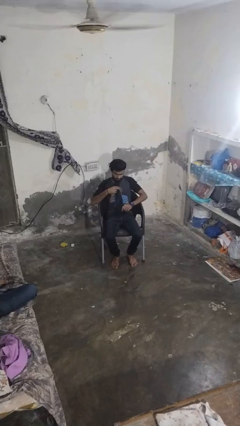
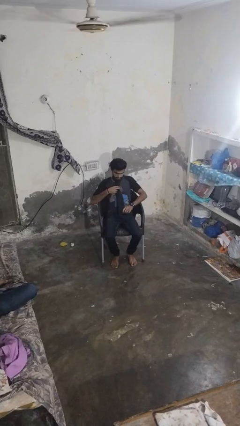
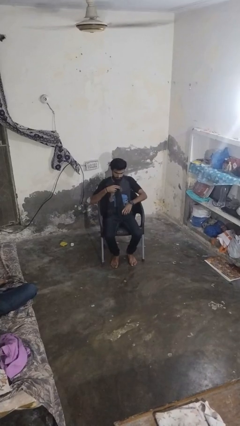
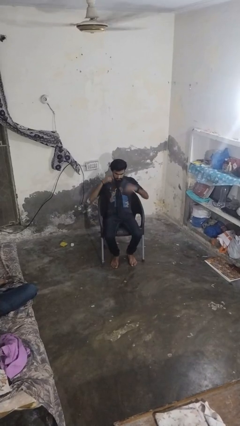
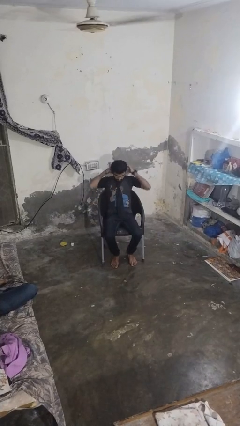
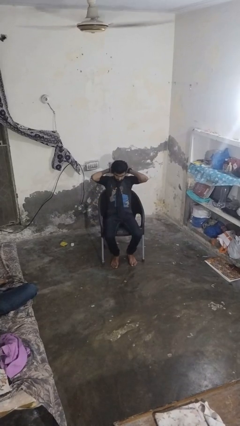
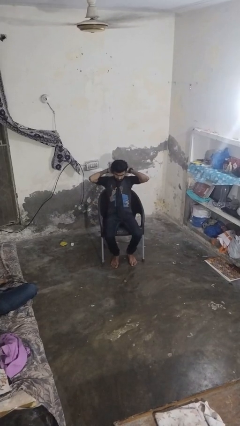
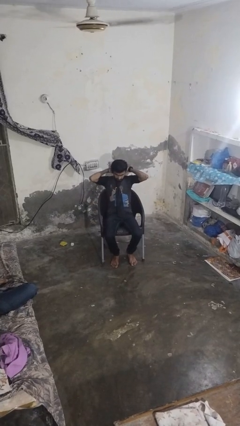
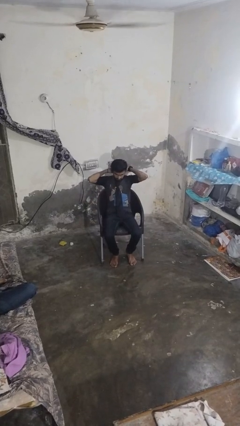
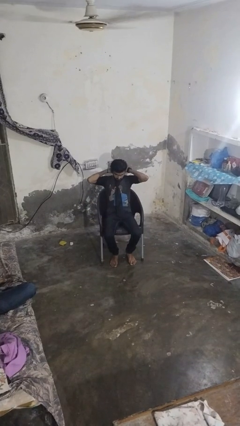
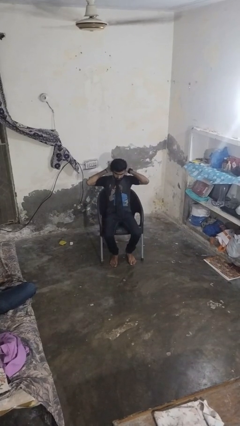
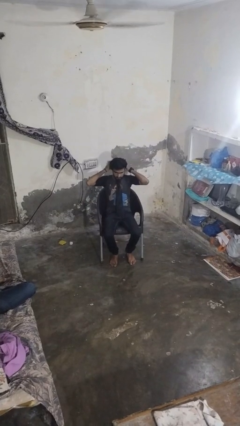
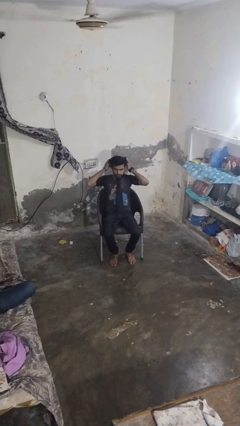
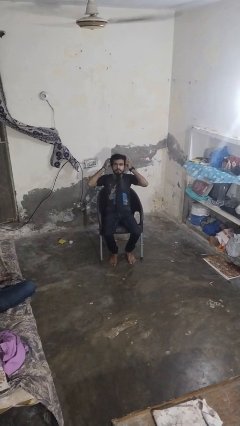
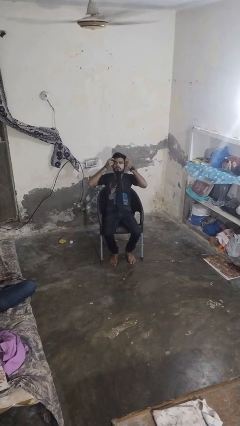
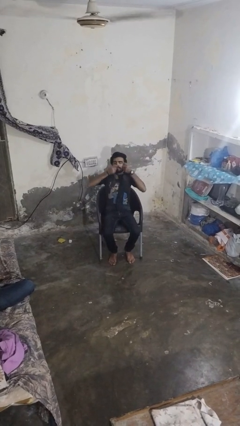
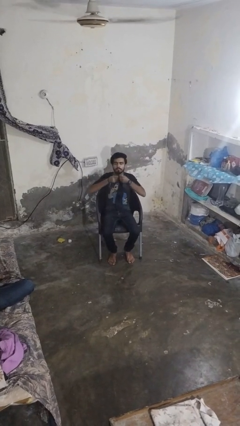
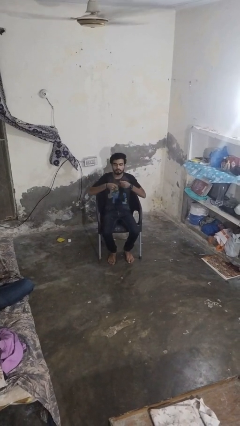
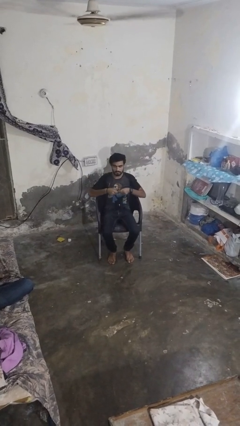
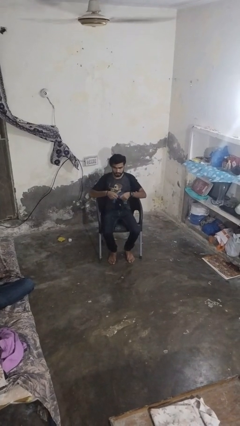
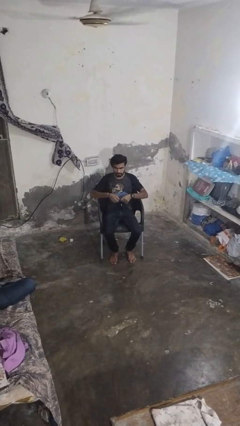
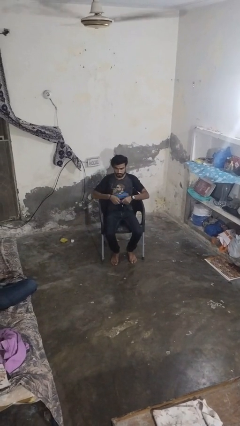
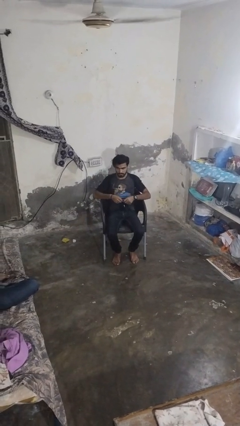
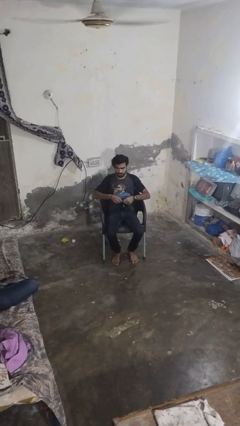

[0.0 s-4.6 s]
person takes off necktie

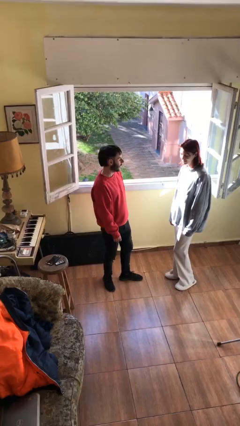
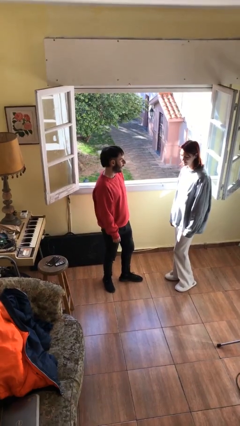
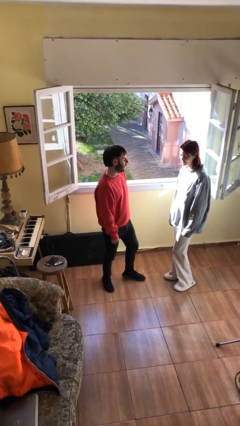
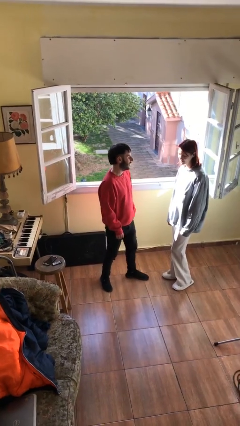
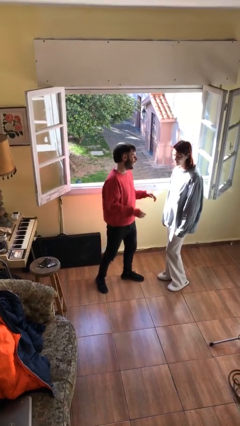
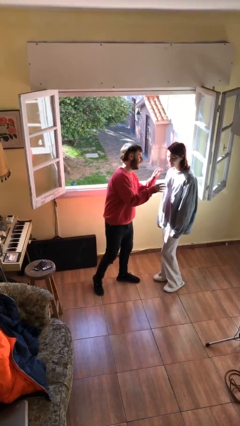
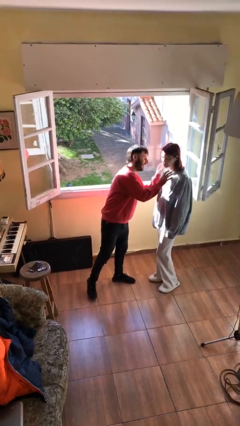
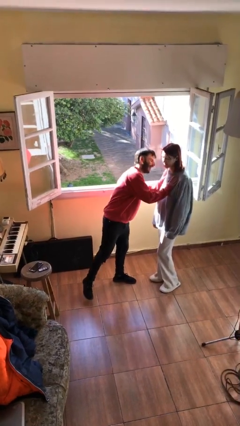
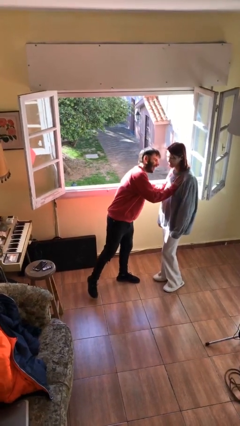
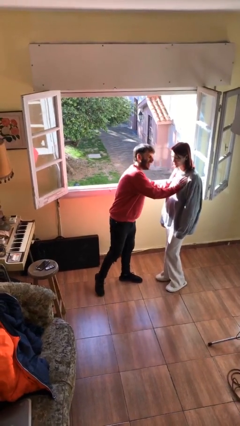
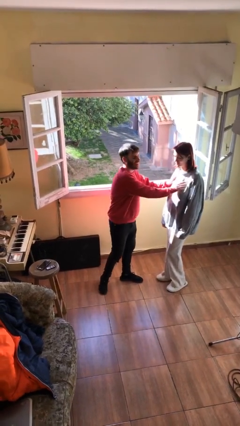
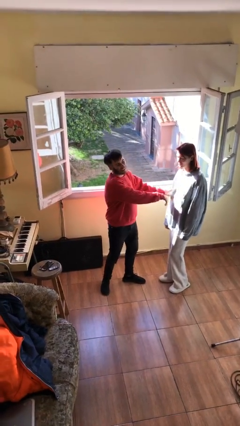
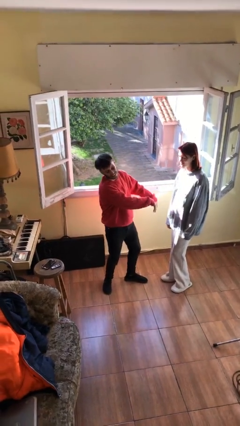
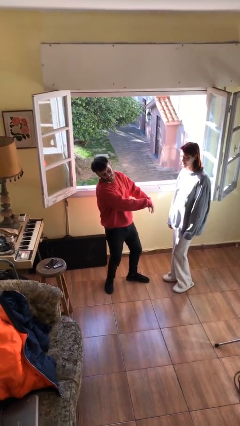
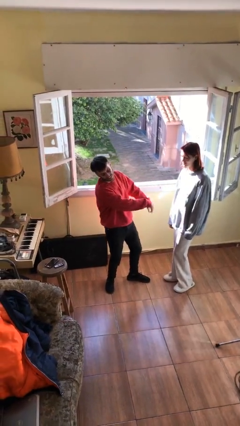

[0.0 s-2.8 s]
person shoves person

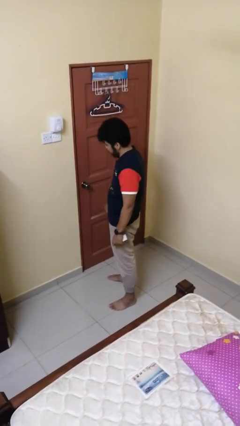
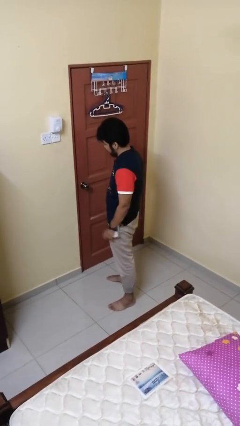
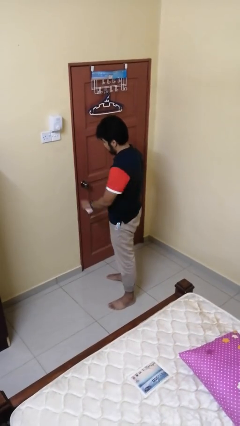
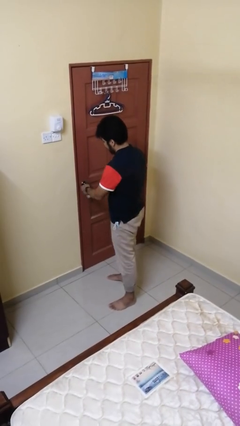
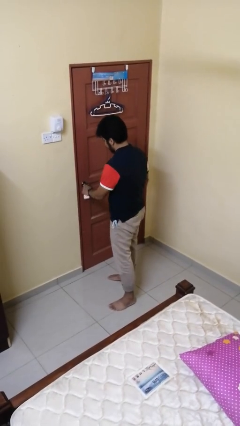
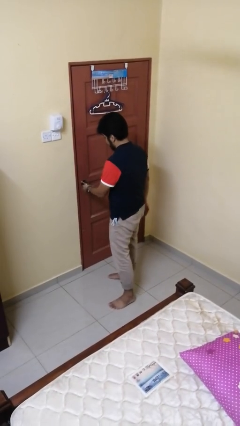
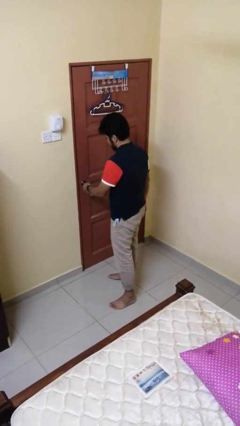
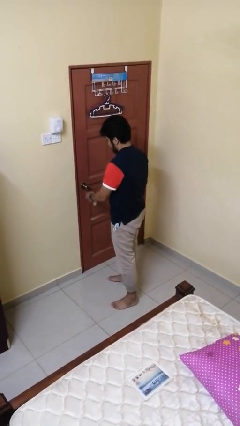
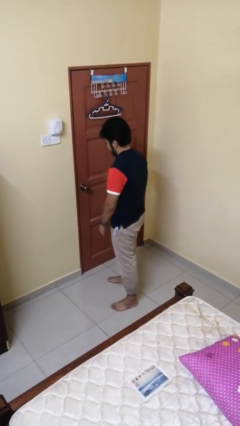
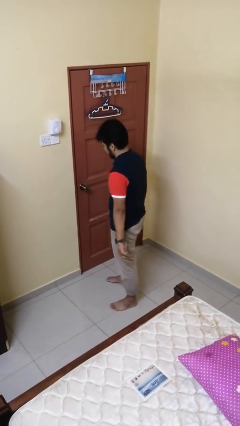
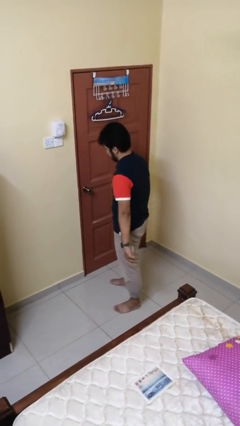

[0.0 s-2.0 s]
person locks door with keys

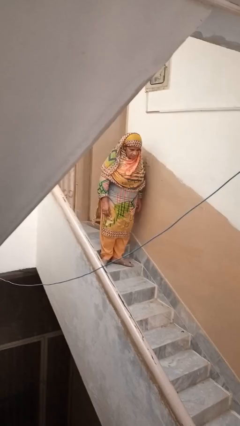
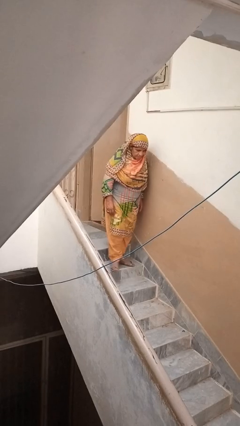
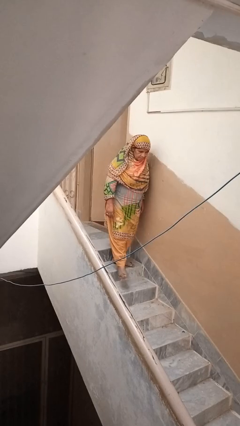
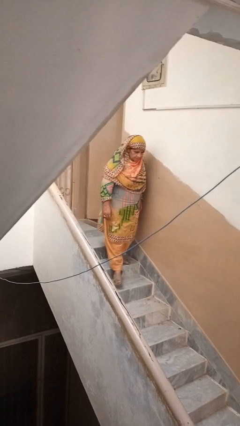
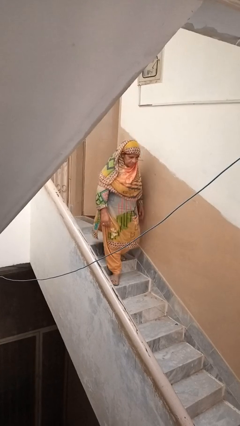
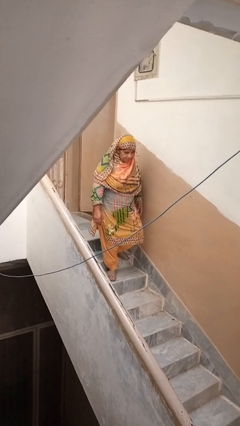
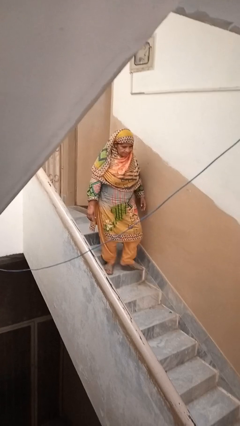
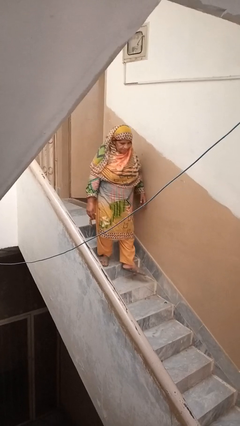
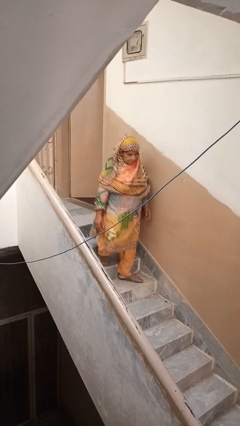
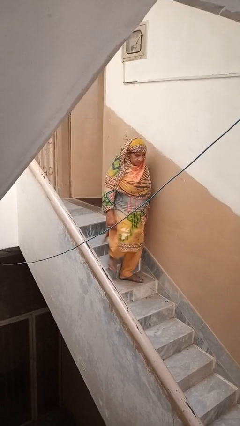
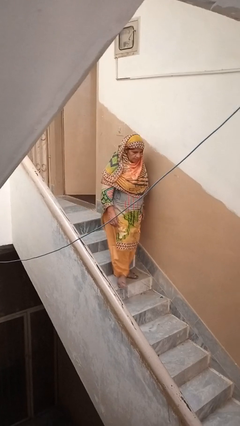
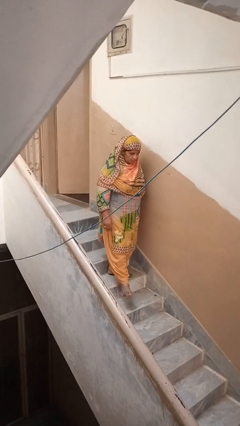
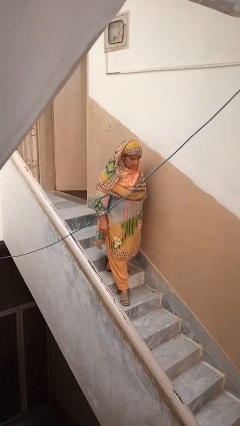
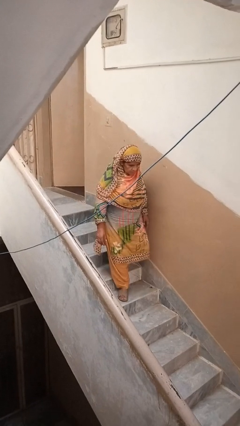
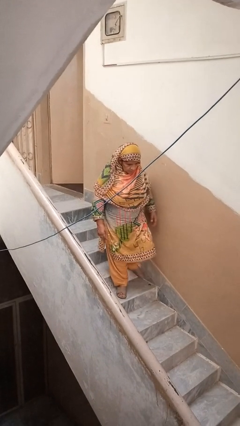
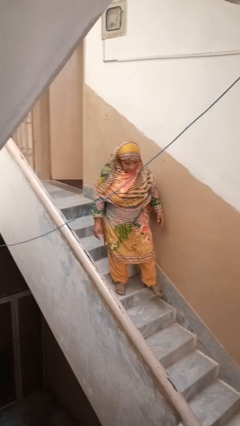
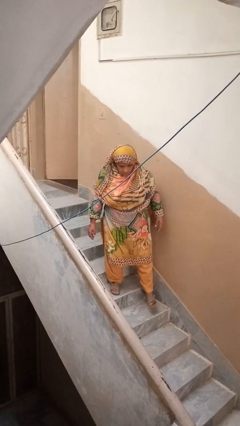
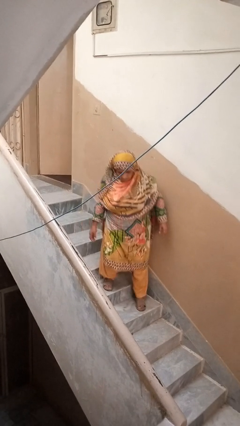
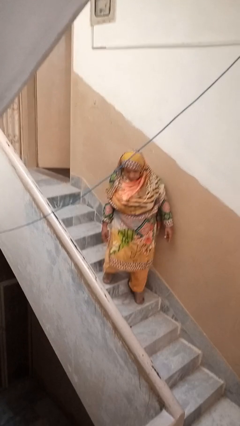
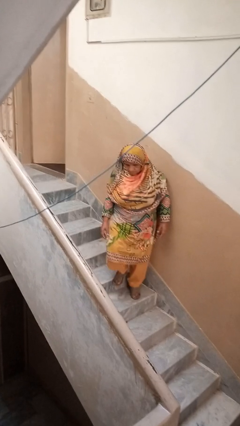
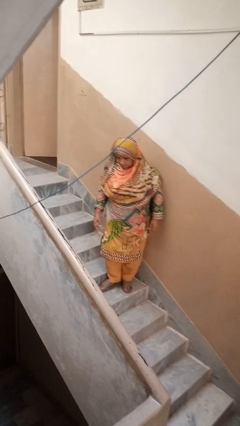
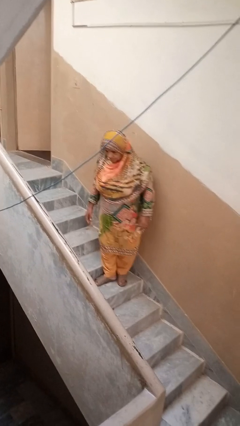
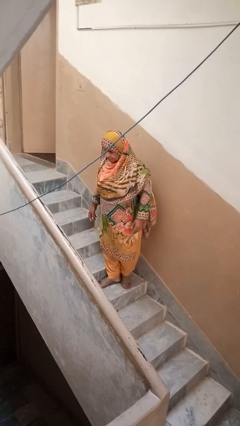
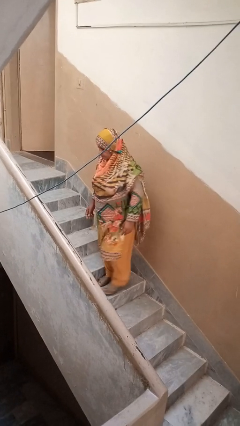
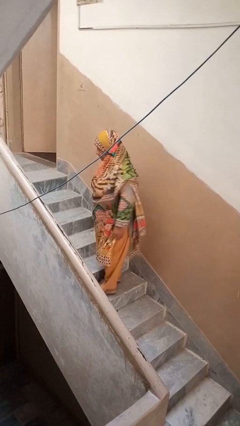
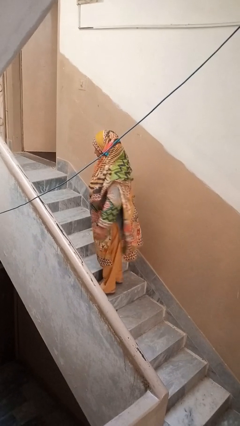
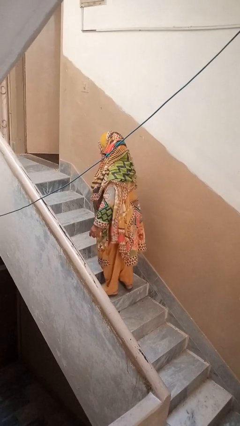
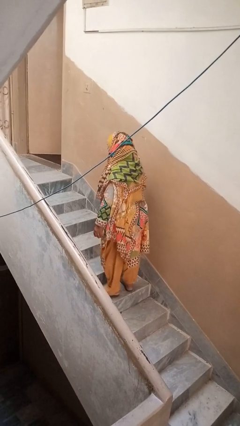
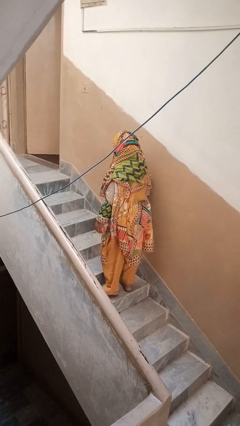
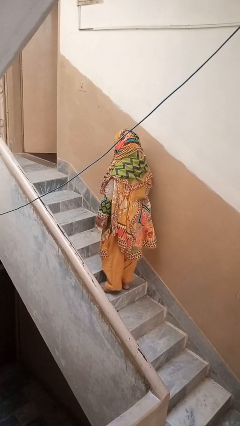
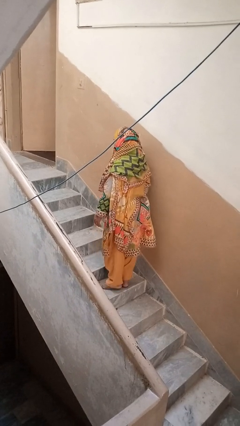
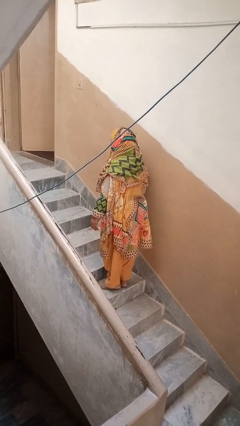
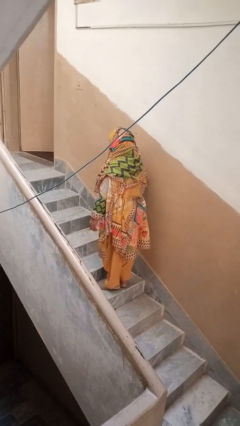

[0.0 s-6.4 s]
person climbs down stairs

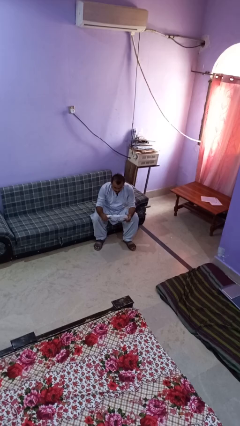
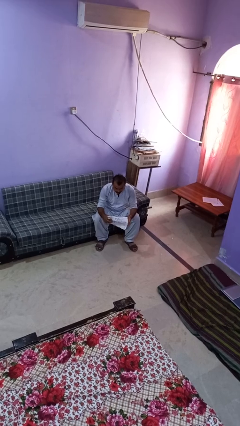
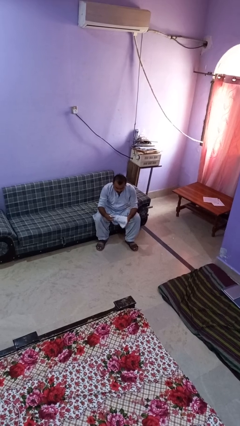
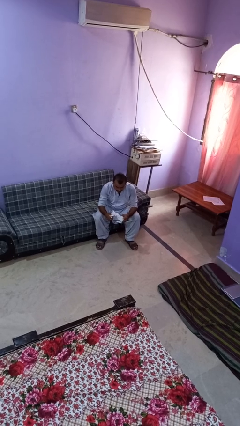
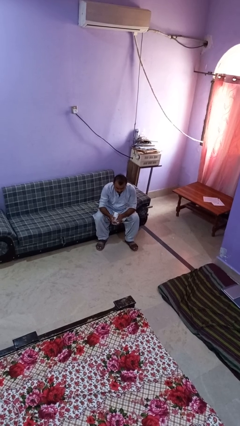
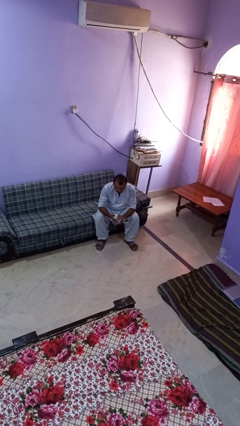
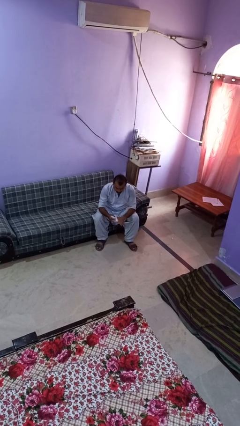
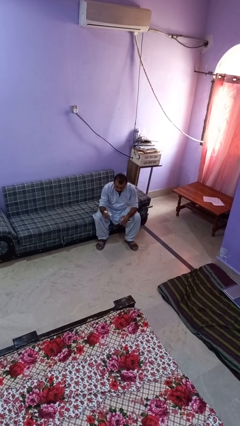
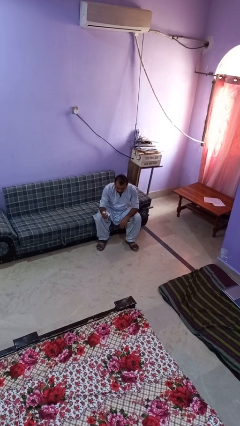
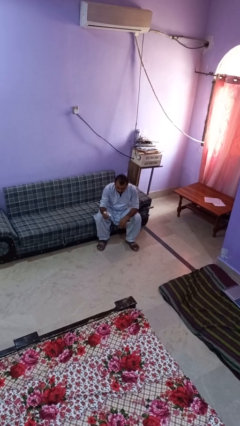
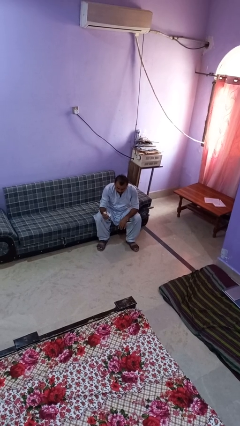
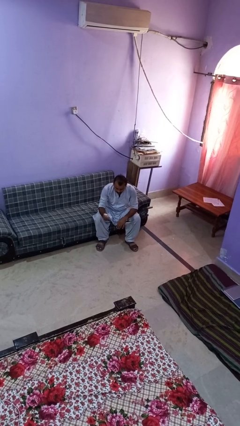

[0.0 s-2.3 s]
person crumples paper
